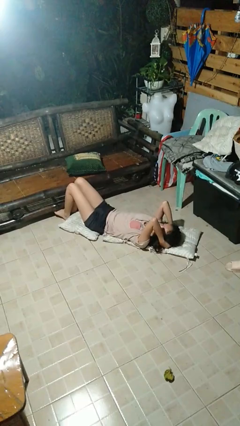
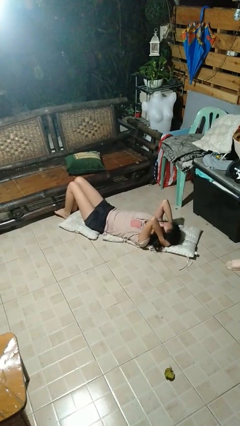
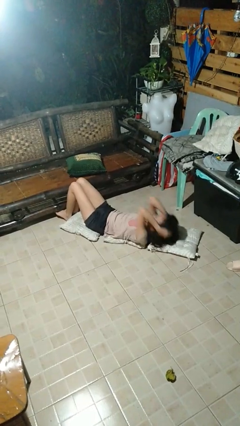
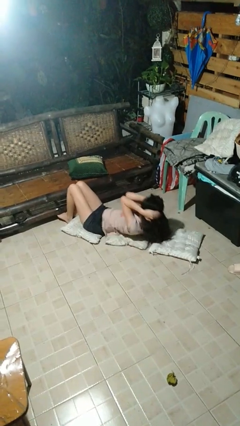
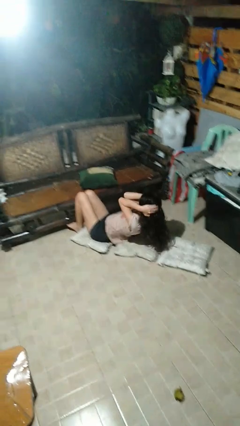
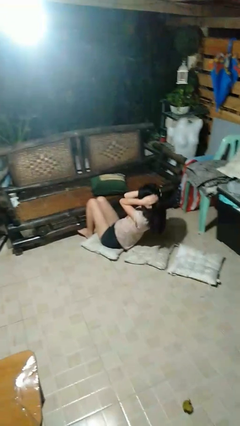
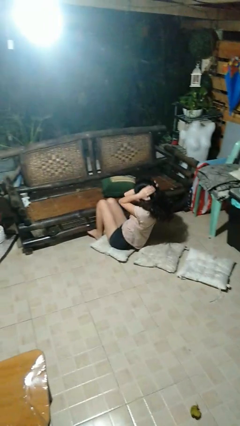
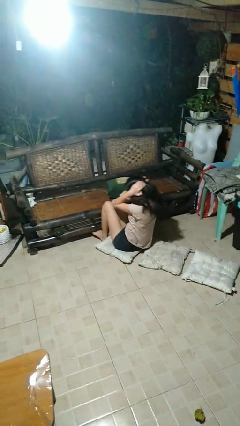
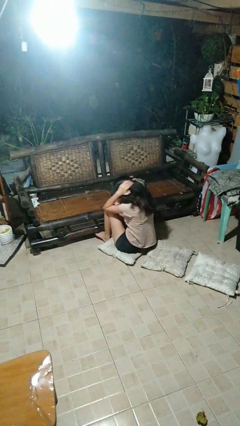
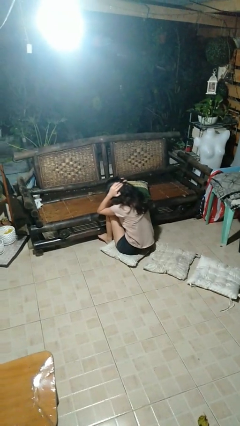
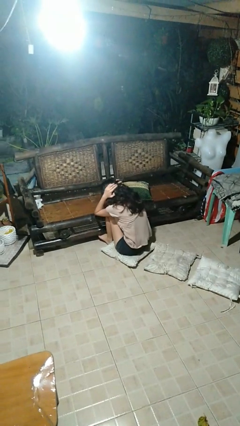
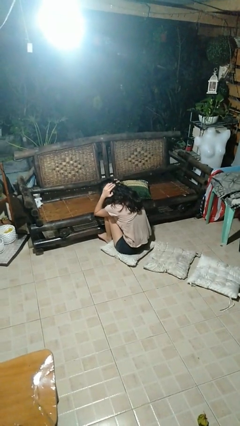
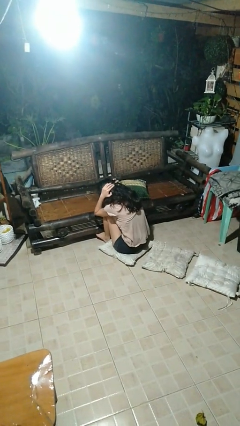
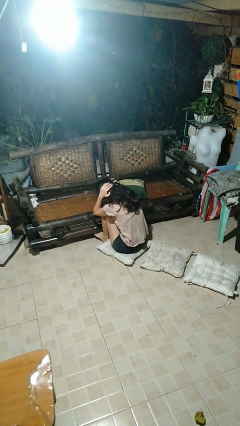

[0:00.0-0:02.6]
person exercises with situp

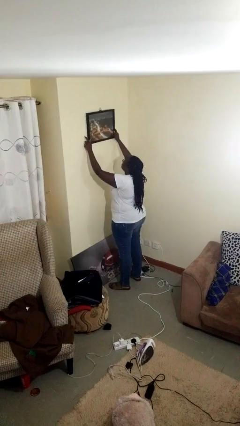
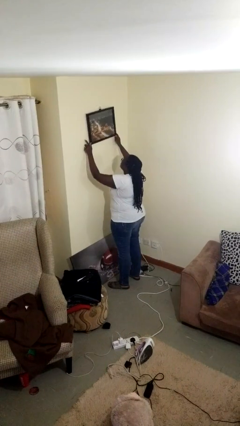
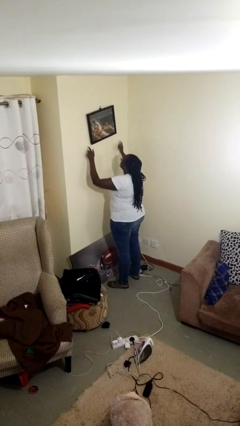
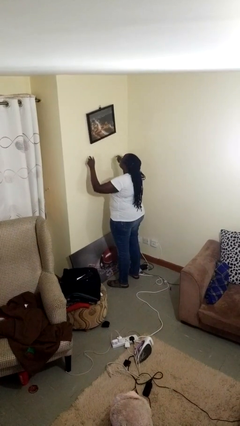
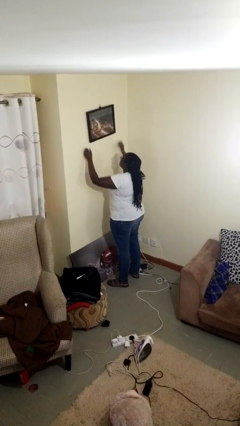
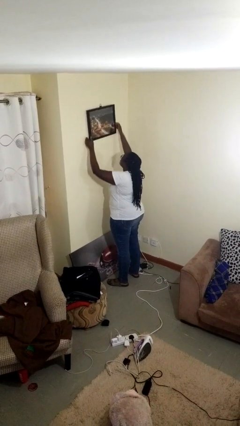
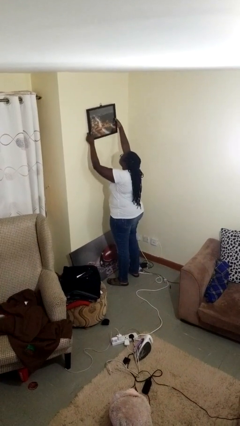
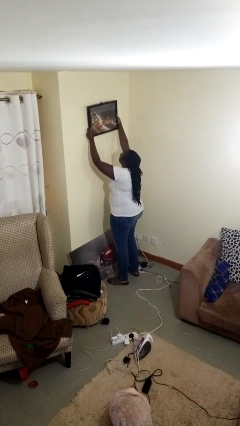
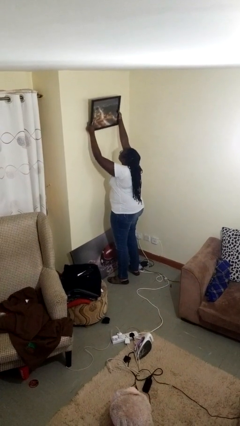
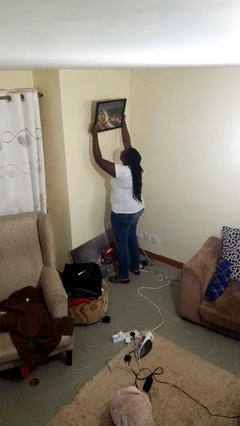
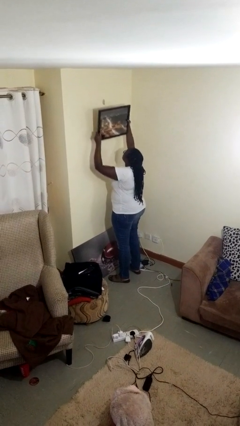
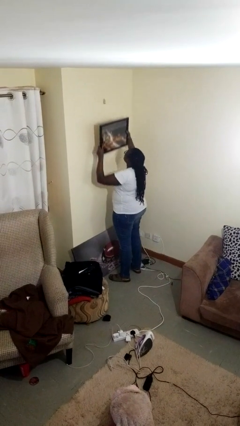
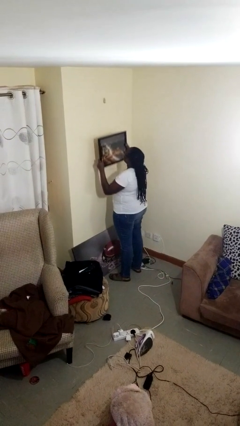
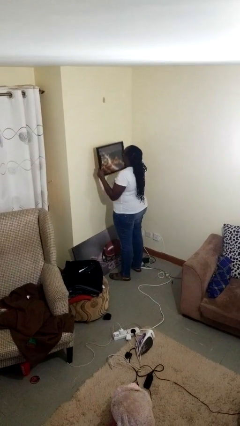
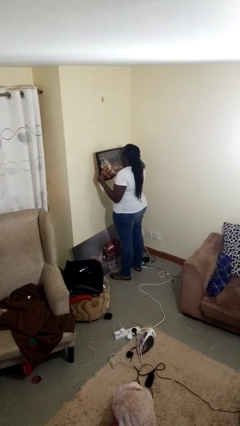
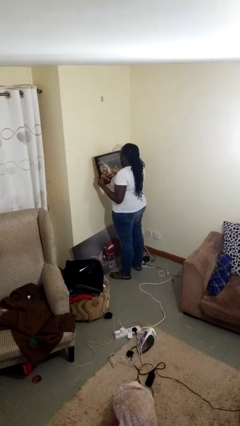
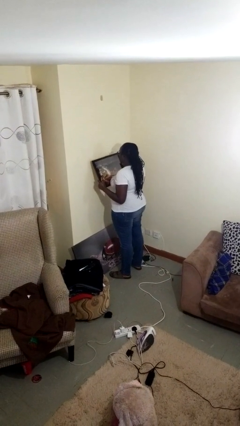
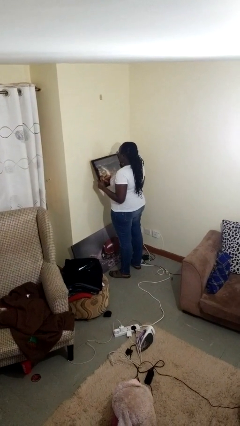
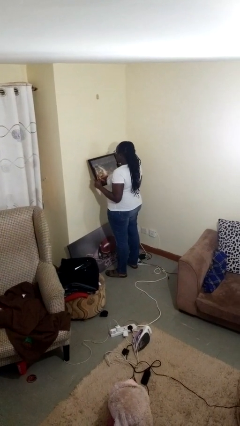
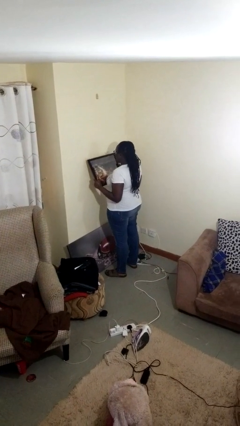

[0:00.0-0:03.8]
person takes down picture frame

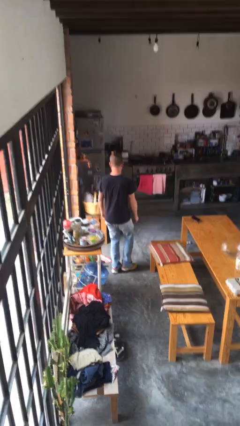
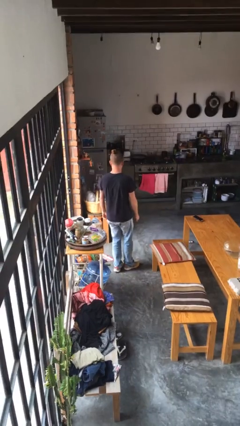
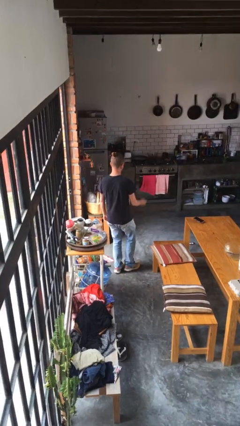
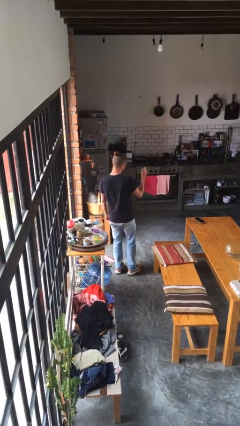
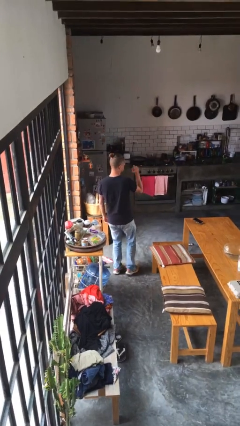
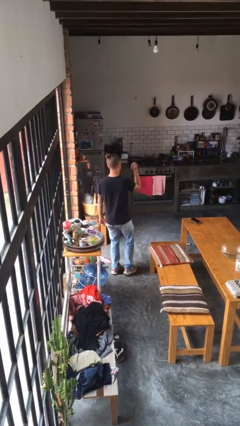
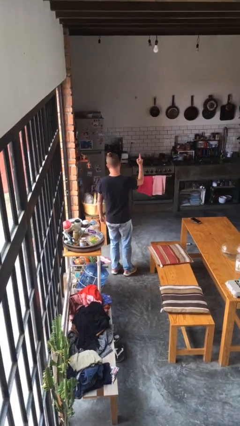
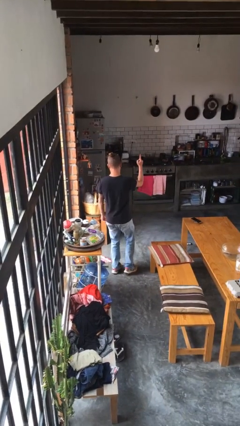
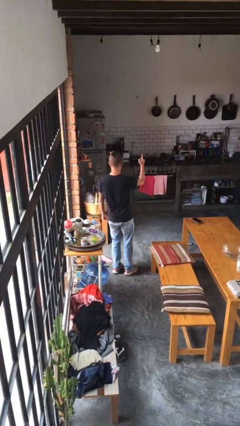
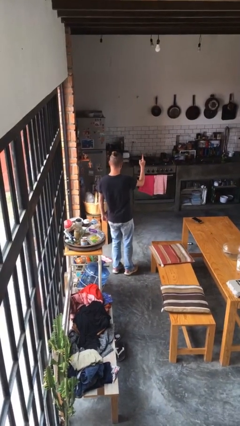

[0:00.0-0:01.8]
person gestures number one

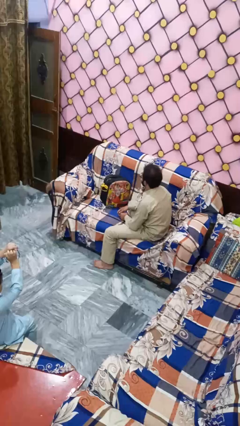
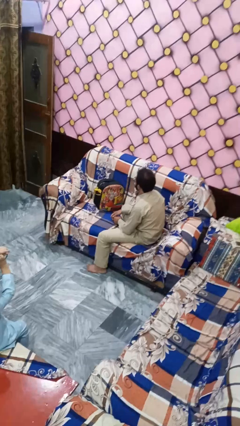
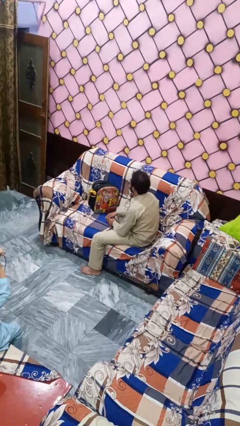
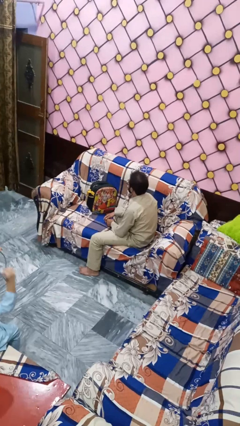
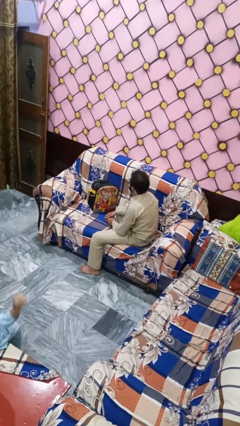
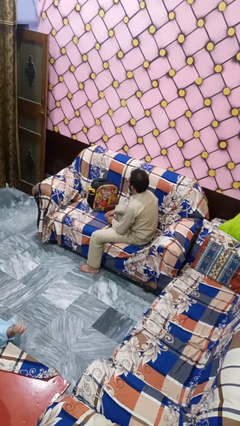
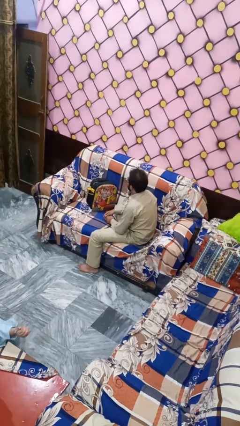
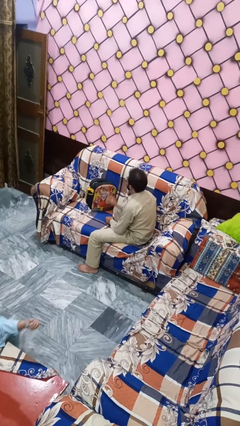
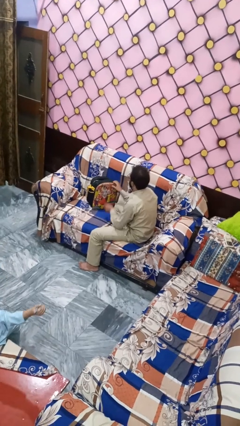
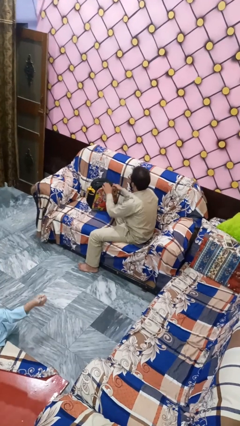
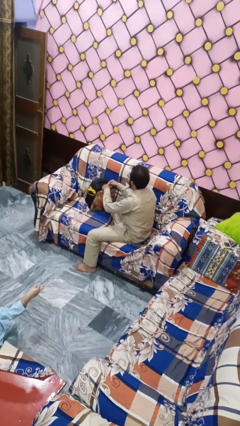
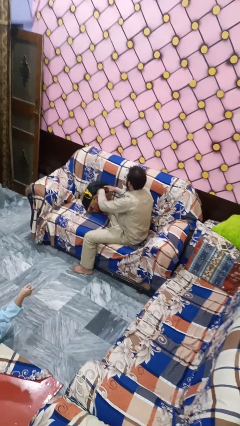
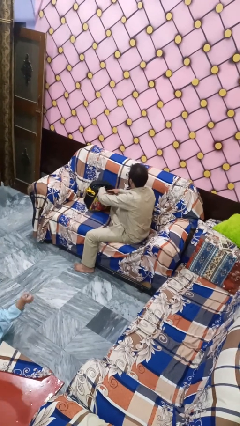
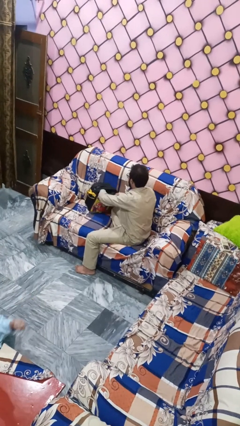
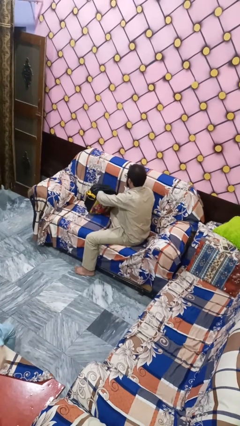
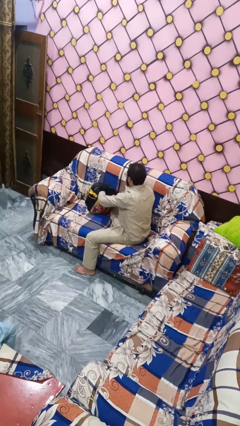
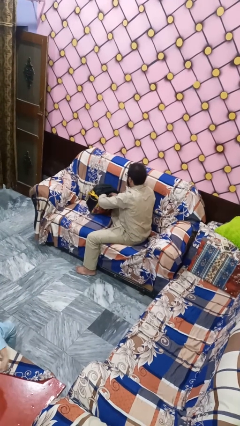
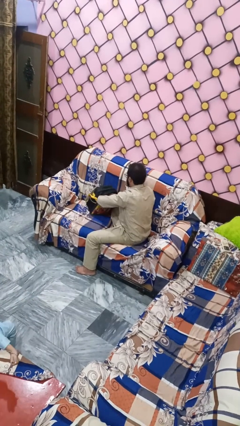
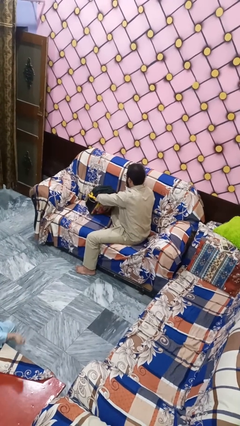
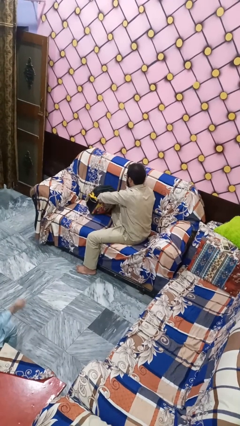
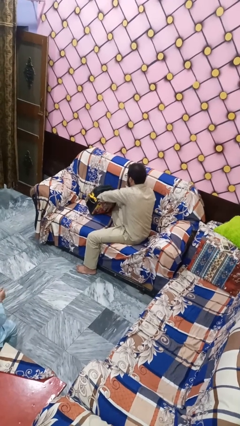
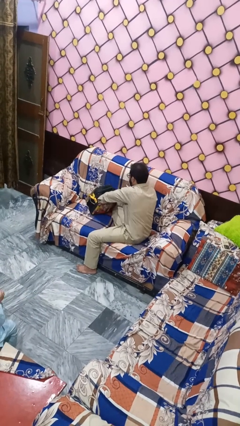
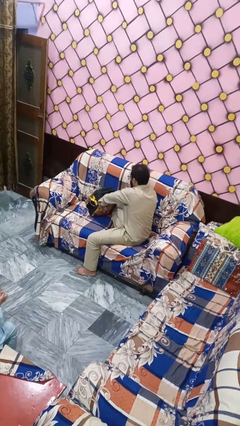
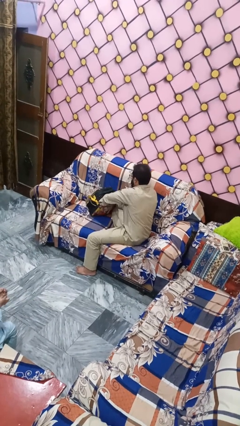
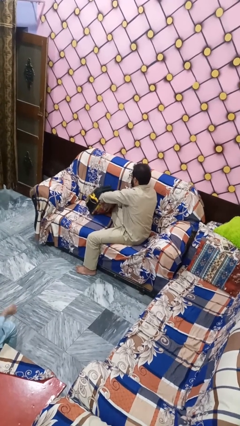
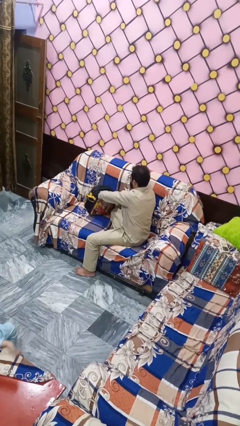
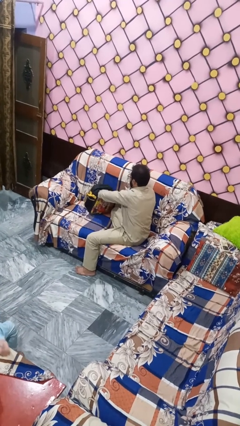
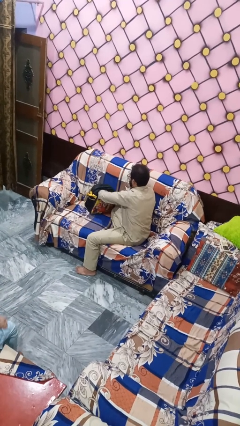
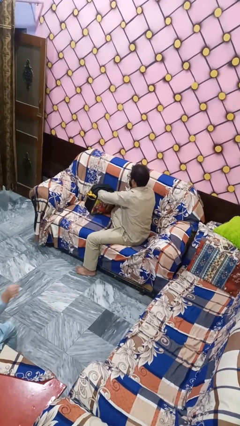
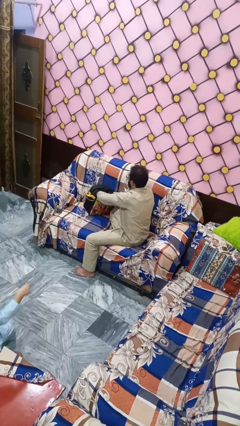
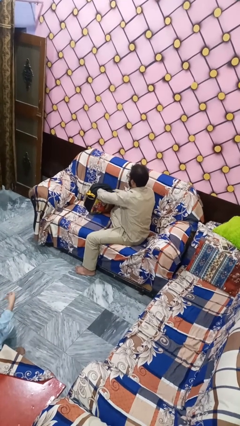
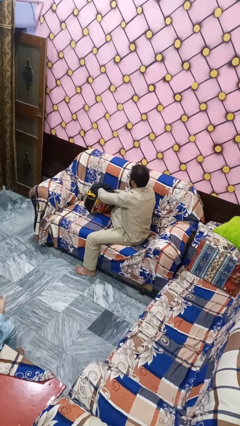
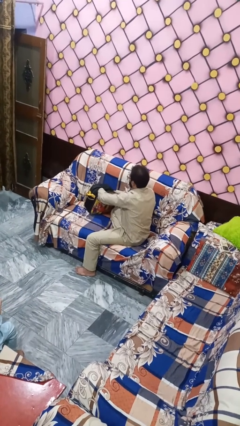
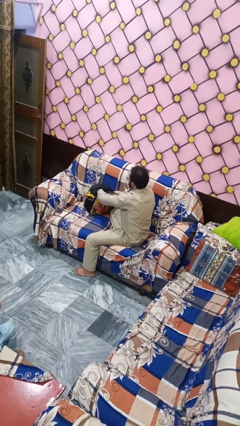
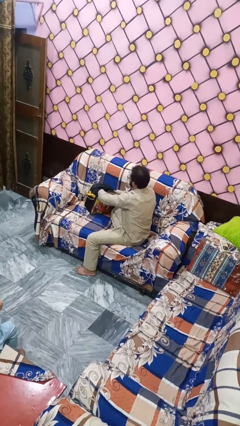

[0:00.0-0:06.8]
person searches in bag

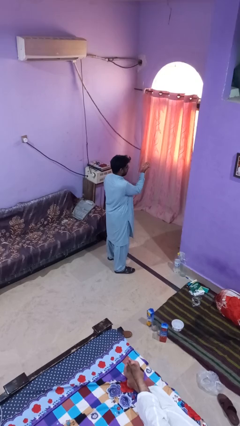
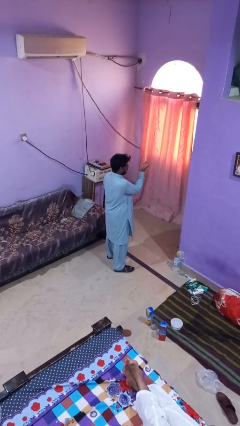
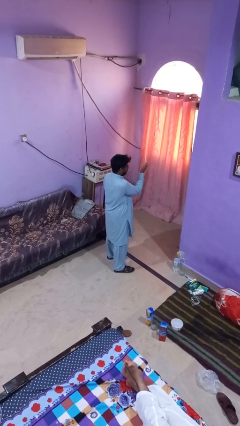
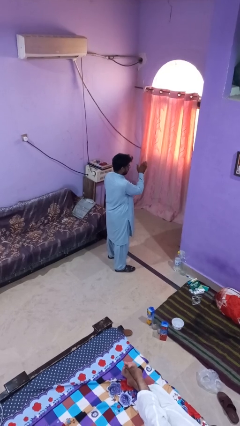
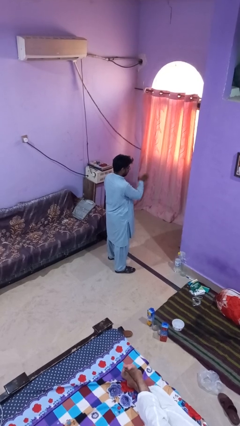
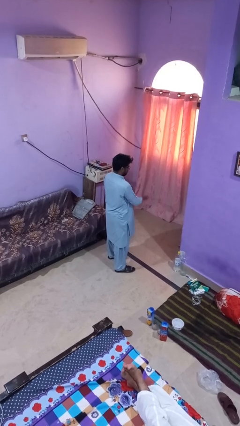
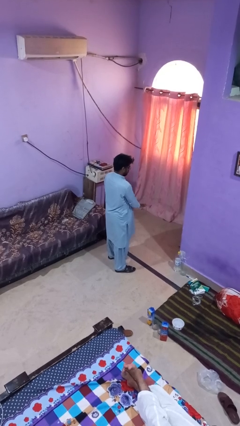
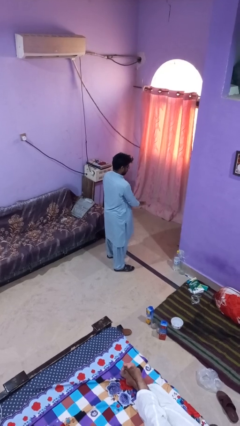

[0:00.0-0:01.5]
person gestures swipe down

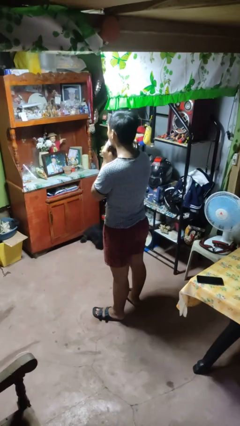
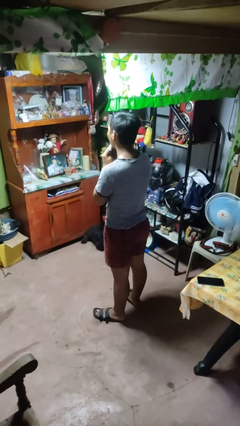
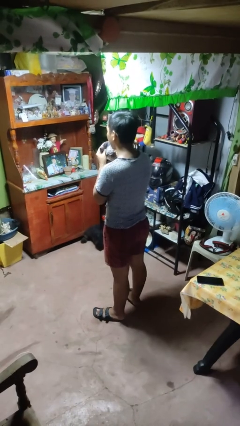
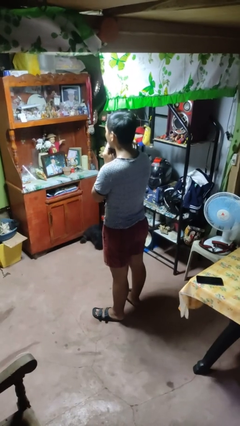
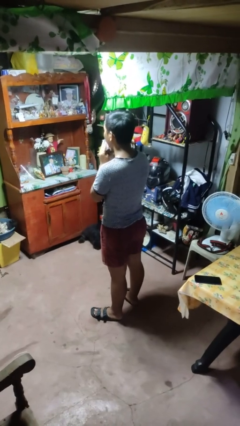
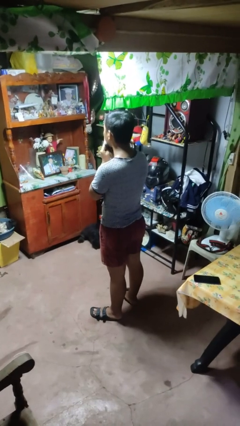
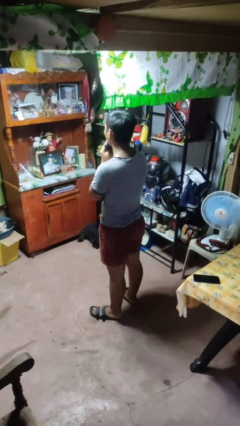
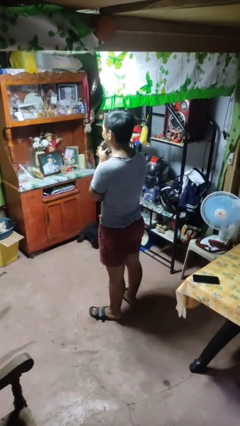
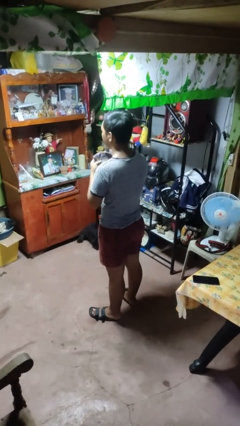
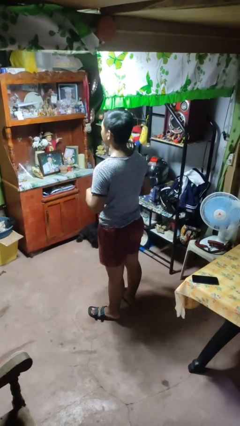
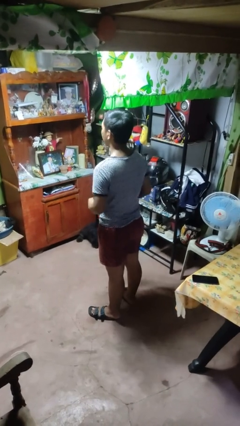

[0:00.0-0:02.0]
person wipes mouth with napkin
